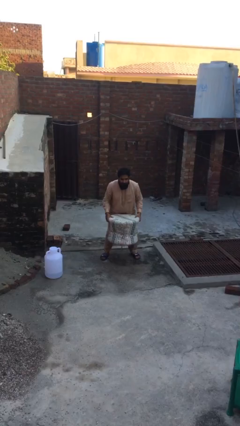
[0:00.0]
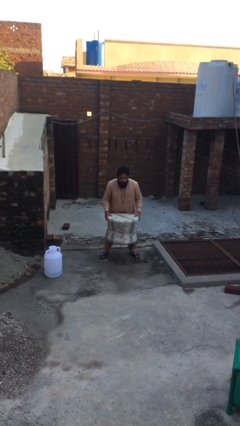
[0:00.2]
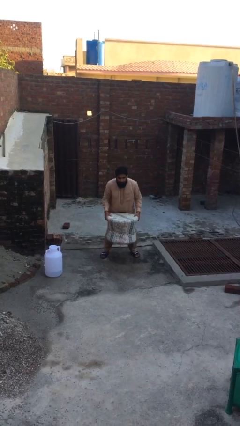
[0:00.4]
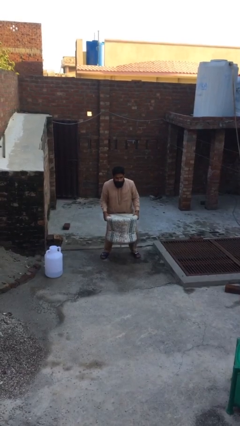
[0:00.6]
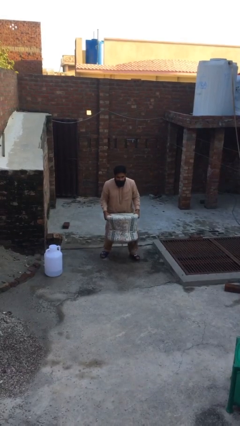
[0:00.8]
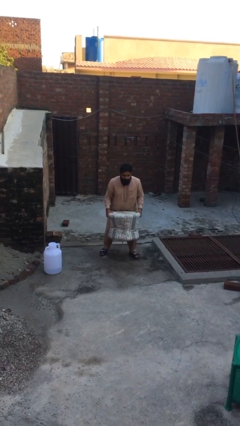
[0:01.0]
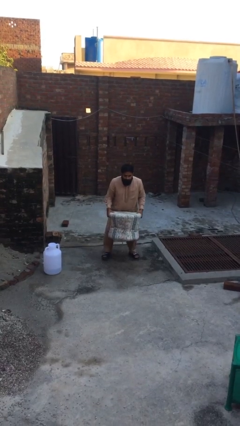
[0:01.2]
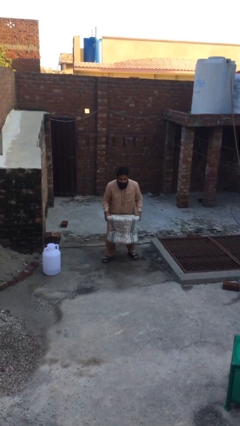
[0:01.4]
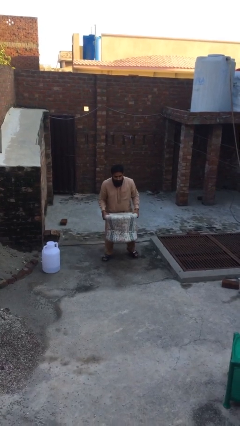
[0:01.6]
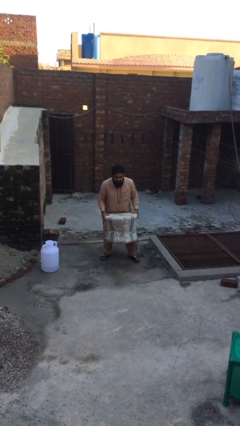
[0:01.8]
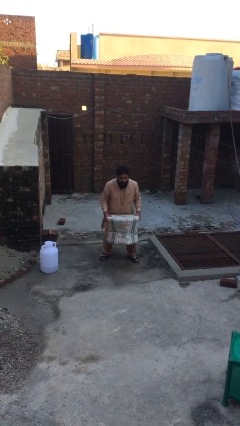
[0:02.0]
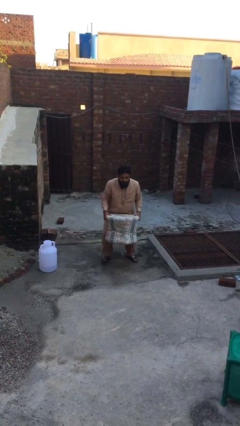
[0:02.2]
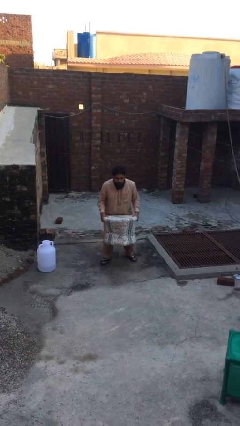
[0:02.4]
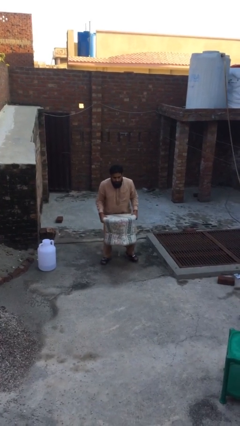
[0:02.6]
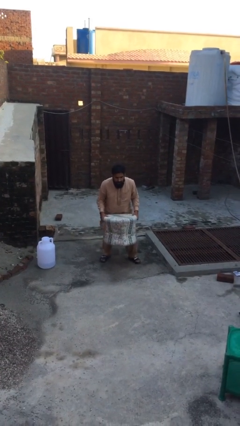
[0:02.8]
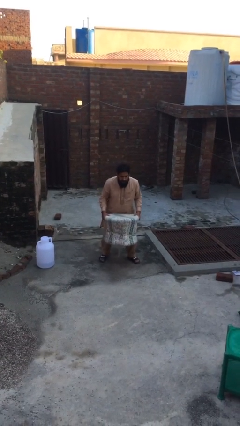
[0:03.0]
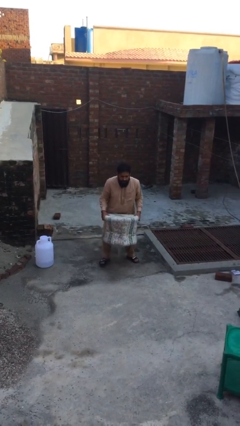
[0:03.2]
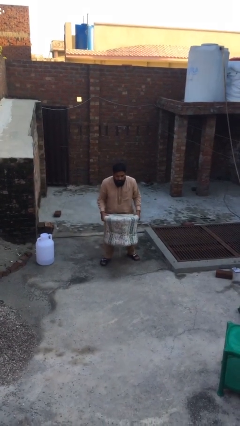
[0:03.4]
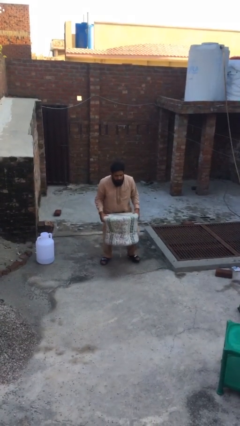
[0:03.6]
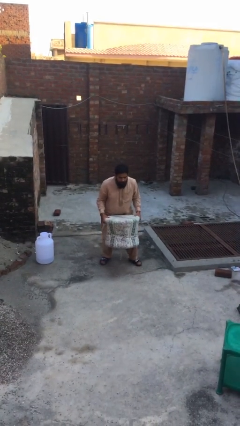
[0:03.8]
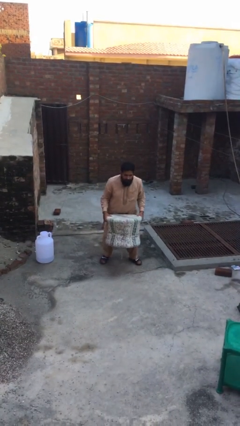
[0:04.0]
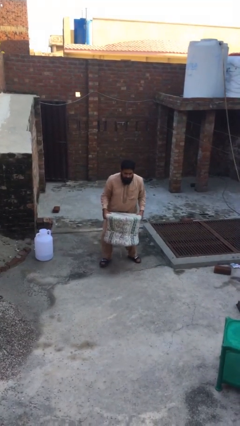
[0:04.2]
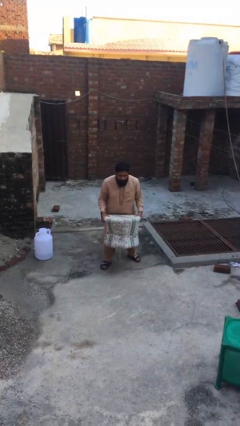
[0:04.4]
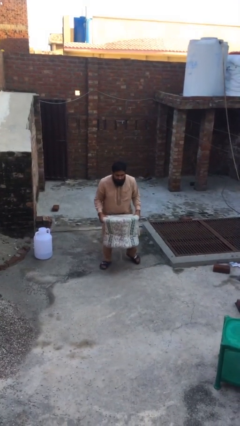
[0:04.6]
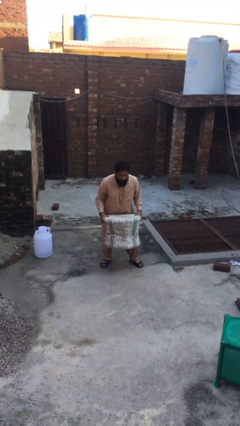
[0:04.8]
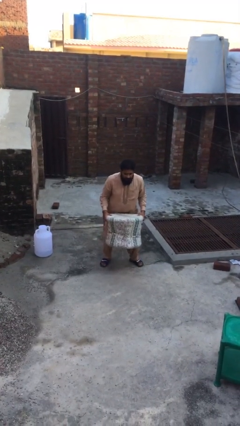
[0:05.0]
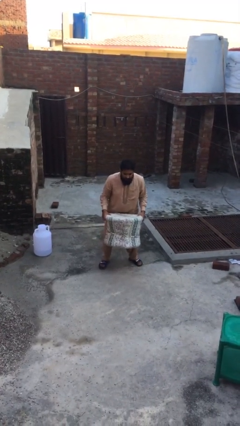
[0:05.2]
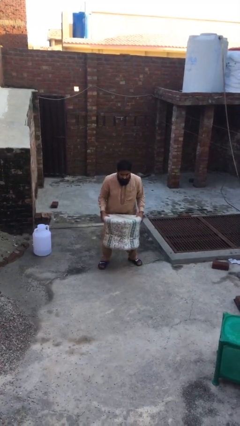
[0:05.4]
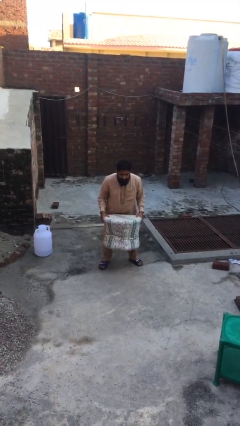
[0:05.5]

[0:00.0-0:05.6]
person carries heavy object

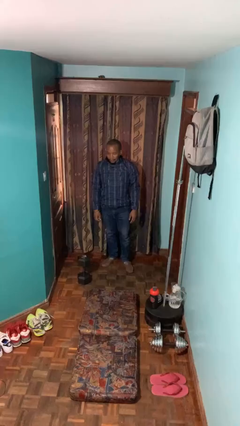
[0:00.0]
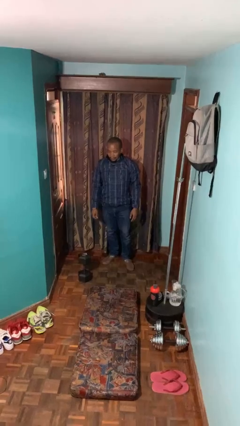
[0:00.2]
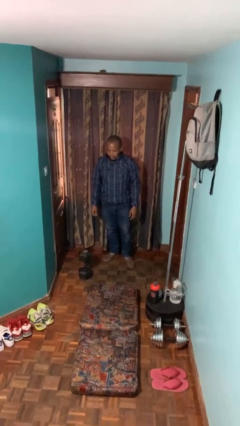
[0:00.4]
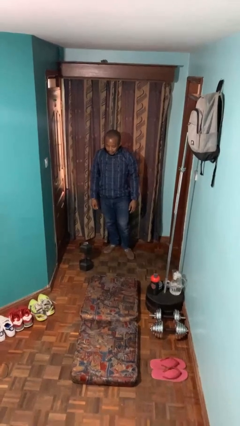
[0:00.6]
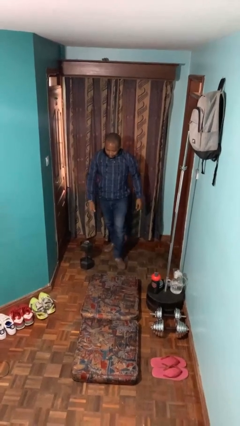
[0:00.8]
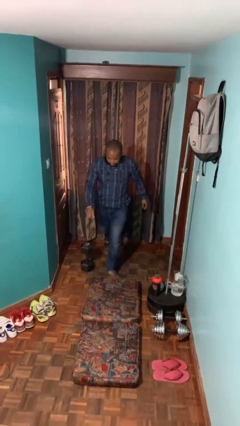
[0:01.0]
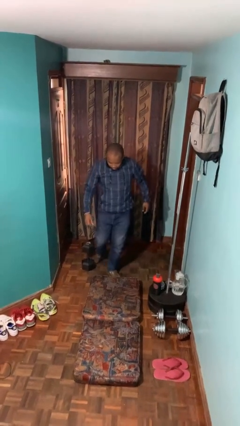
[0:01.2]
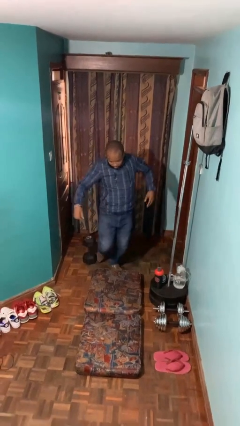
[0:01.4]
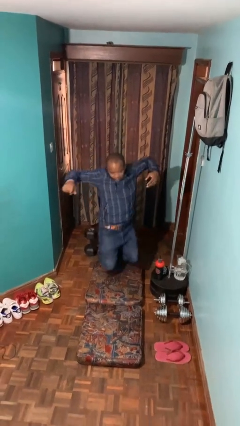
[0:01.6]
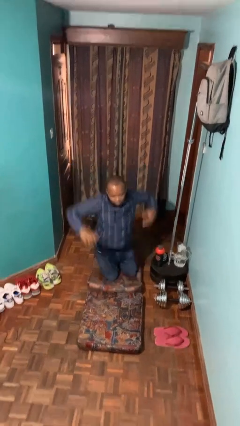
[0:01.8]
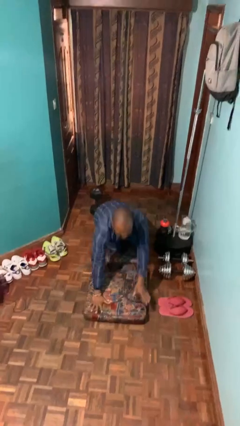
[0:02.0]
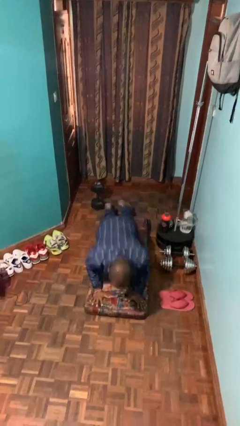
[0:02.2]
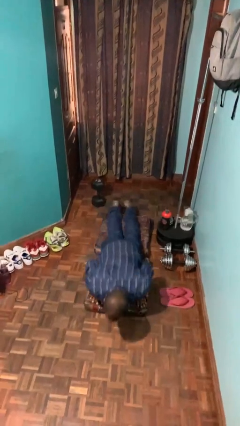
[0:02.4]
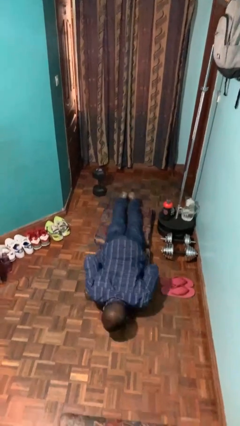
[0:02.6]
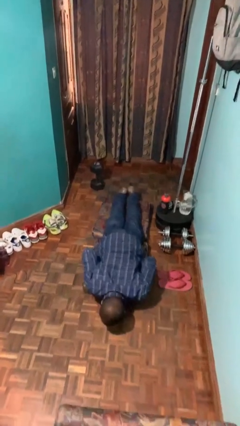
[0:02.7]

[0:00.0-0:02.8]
person trips on object on floor

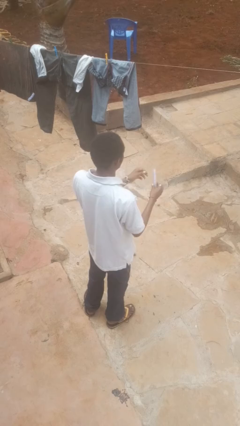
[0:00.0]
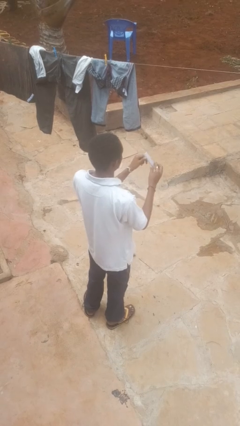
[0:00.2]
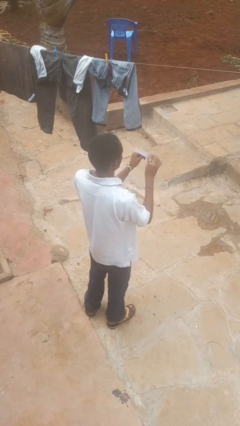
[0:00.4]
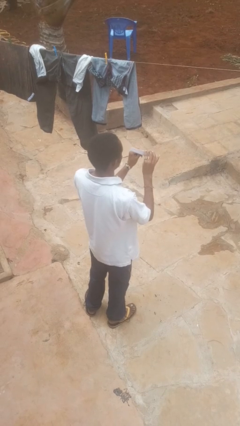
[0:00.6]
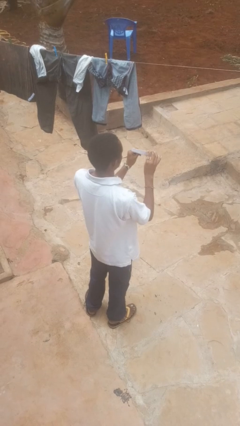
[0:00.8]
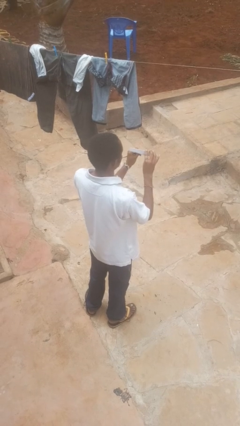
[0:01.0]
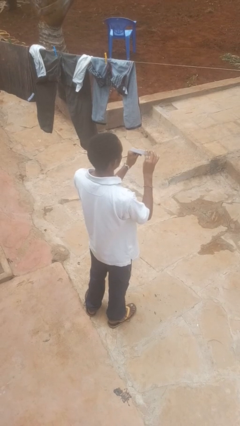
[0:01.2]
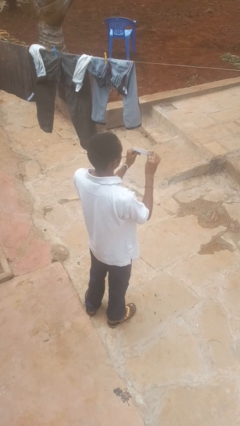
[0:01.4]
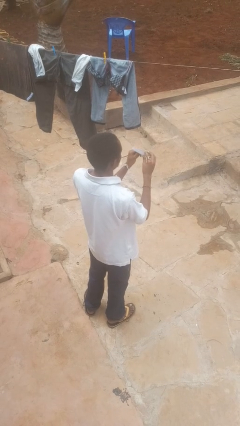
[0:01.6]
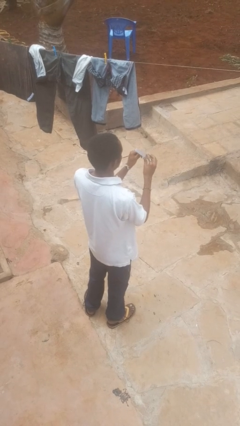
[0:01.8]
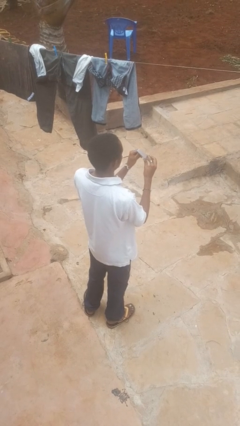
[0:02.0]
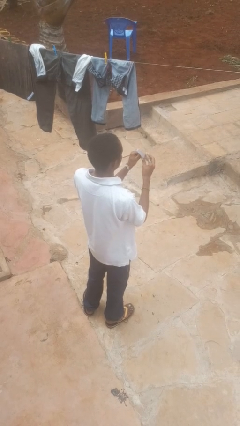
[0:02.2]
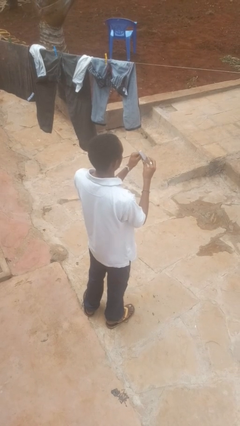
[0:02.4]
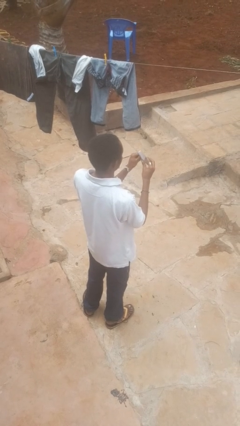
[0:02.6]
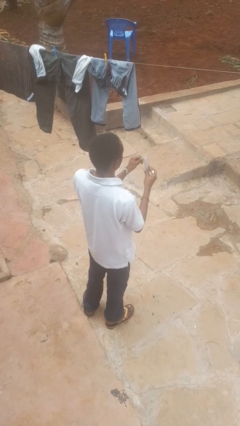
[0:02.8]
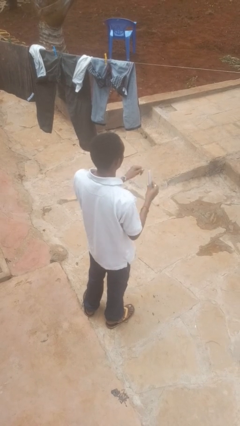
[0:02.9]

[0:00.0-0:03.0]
person files fingernails

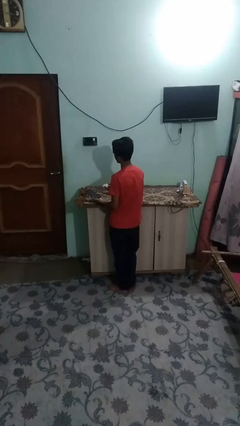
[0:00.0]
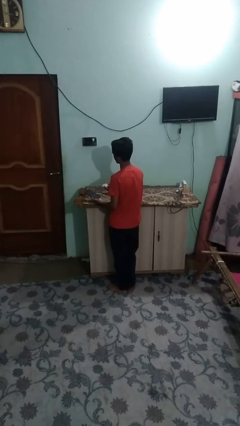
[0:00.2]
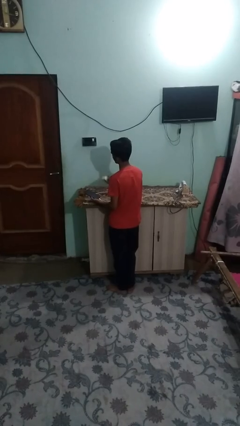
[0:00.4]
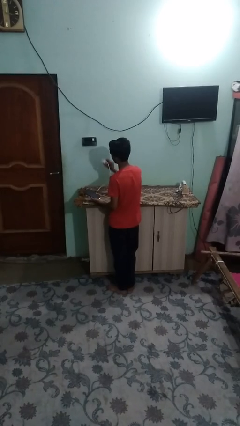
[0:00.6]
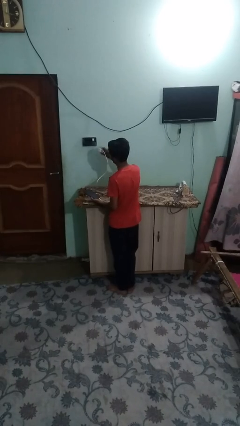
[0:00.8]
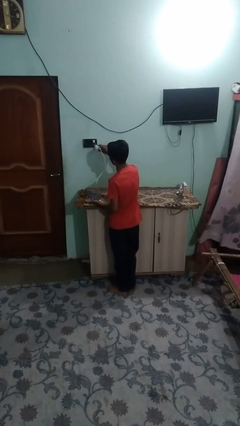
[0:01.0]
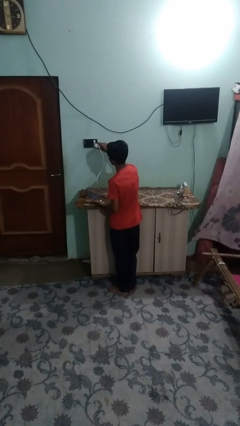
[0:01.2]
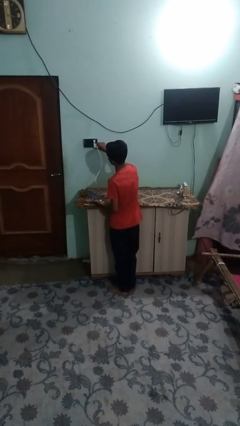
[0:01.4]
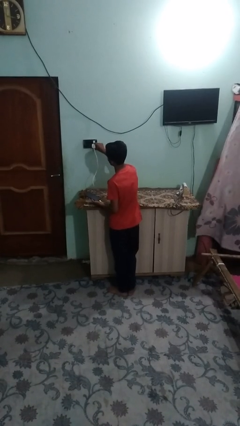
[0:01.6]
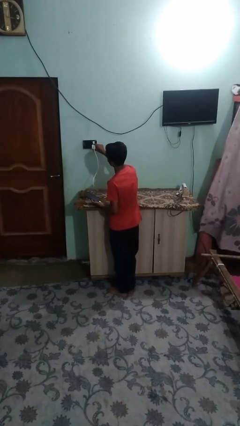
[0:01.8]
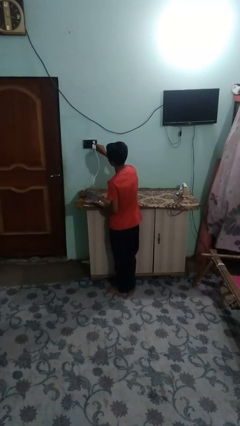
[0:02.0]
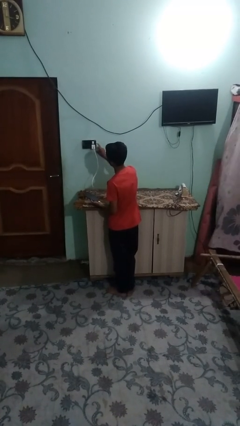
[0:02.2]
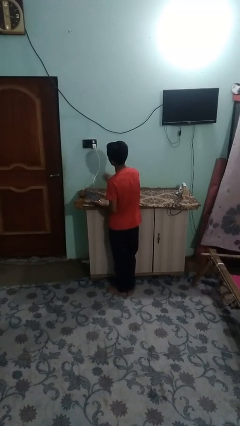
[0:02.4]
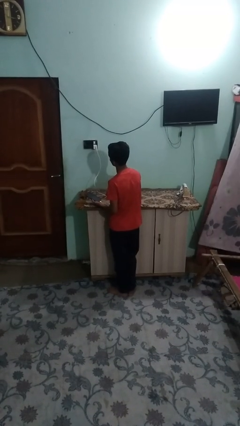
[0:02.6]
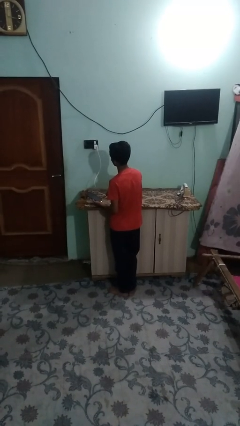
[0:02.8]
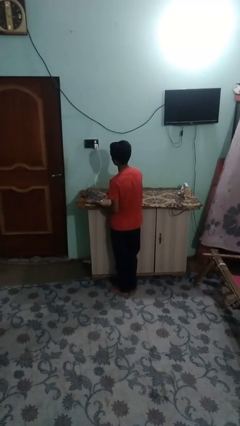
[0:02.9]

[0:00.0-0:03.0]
person plugs into electrical socket

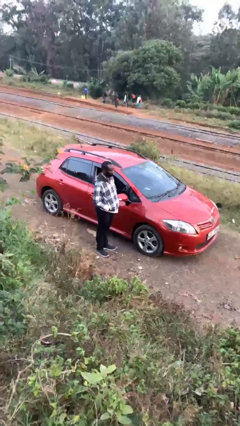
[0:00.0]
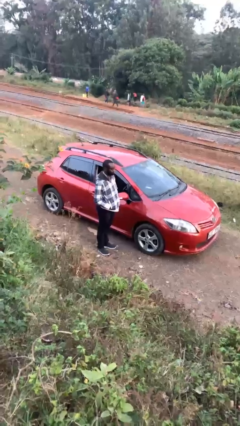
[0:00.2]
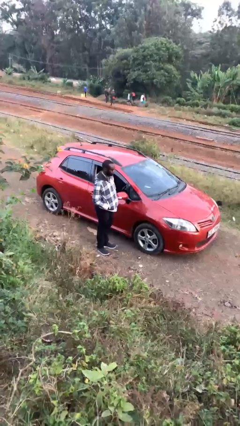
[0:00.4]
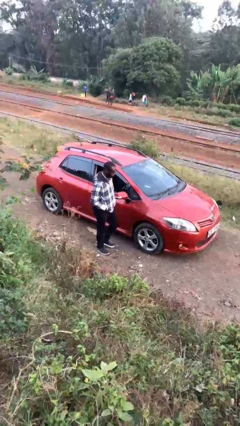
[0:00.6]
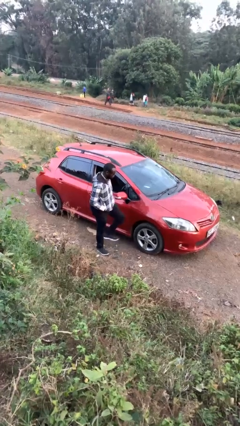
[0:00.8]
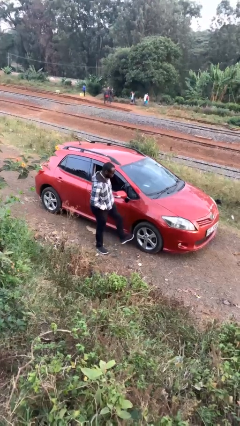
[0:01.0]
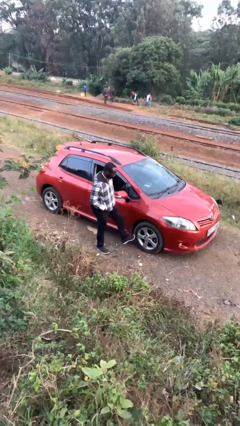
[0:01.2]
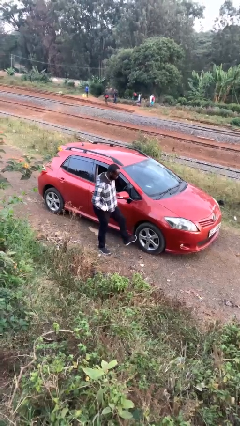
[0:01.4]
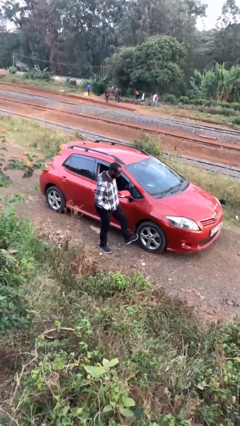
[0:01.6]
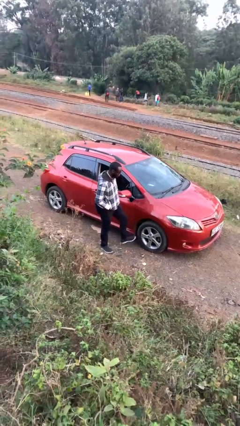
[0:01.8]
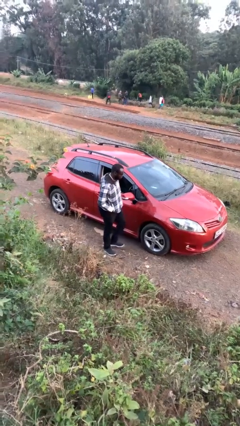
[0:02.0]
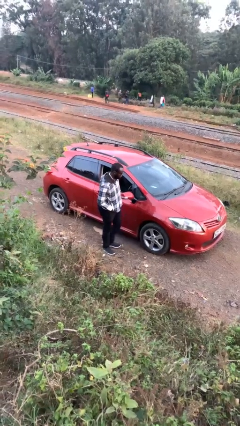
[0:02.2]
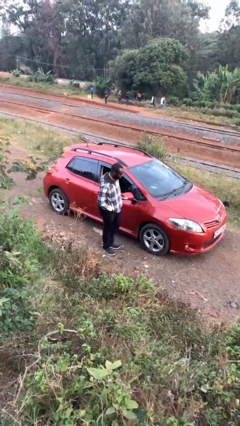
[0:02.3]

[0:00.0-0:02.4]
person kicks car tires

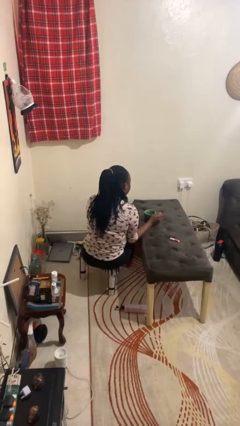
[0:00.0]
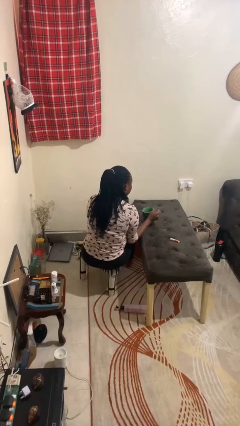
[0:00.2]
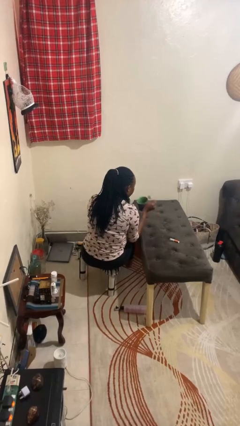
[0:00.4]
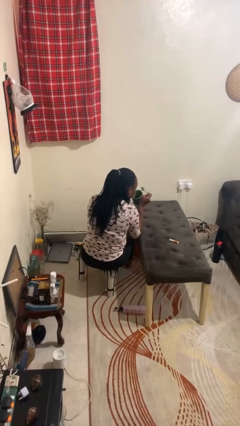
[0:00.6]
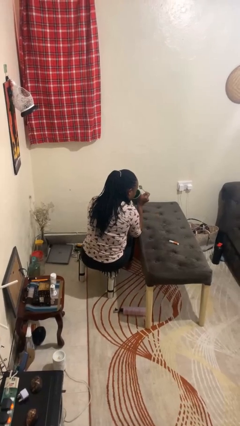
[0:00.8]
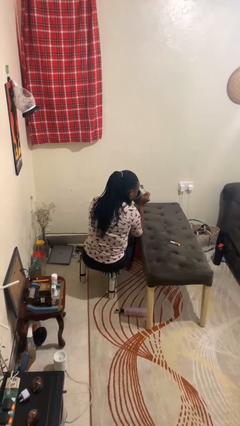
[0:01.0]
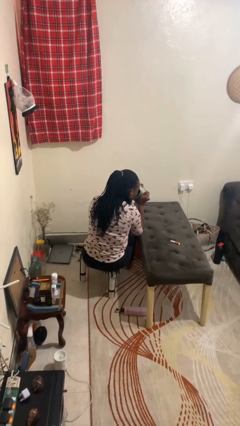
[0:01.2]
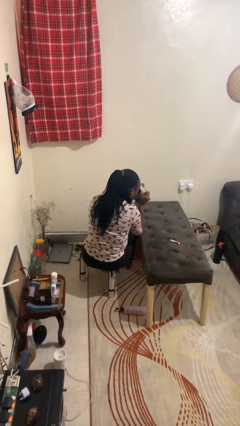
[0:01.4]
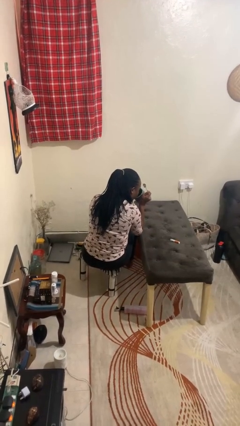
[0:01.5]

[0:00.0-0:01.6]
person drinks from mug
